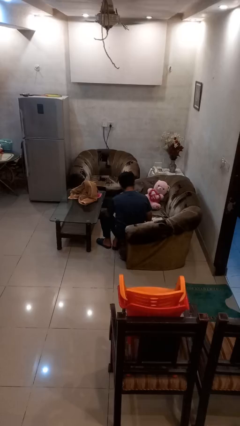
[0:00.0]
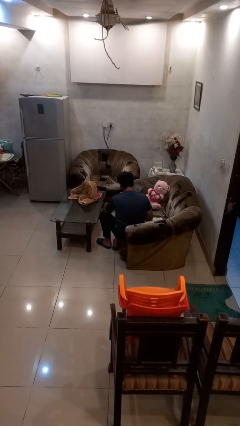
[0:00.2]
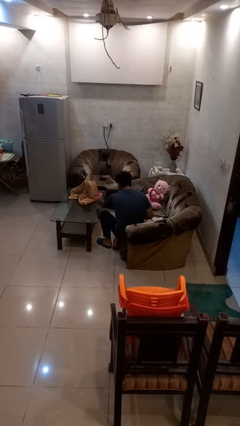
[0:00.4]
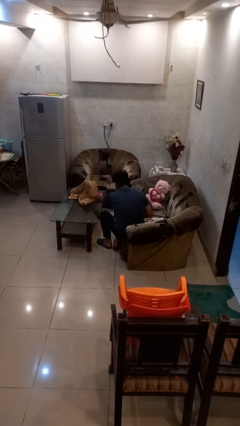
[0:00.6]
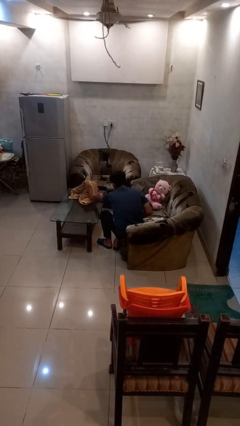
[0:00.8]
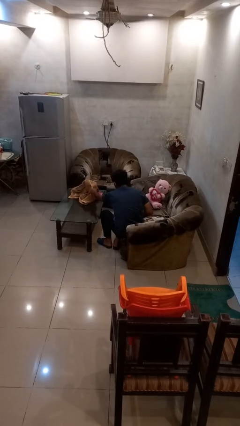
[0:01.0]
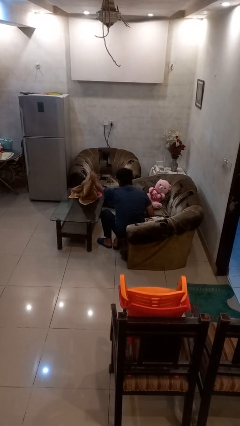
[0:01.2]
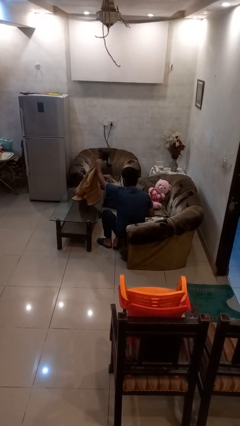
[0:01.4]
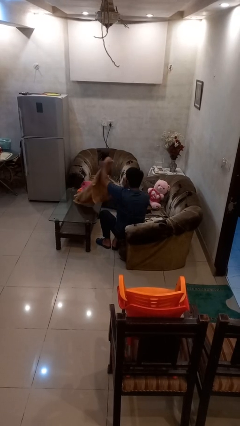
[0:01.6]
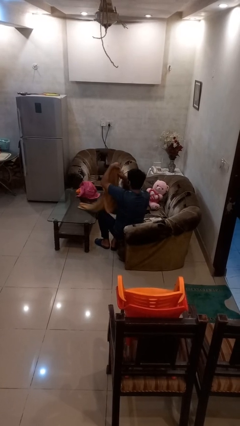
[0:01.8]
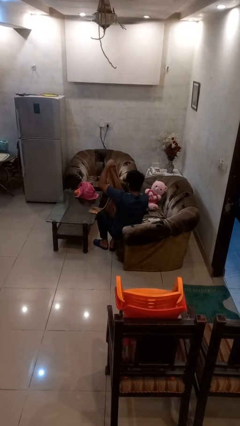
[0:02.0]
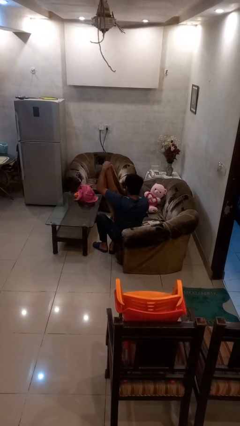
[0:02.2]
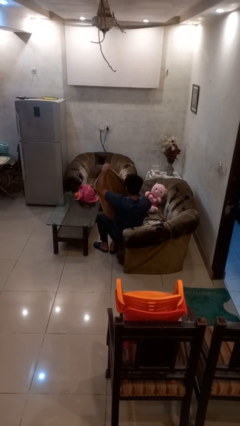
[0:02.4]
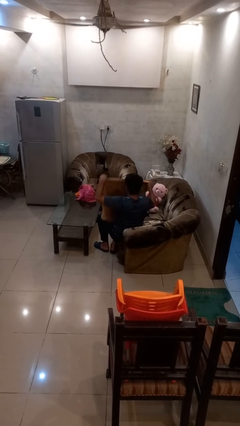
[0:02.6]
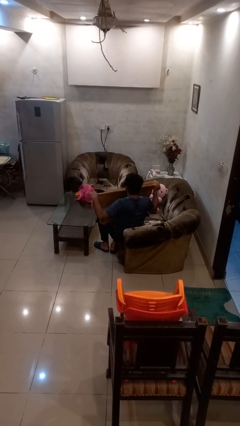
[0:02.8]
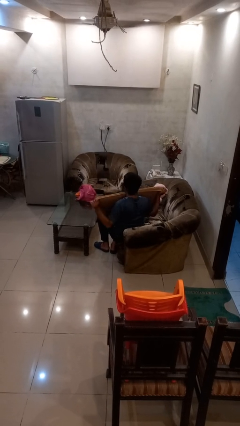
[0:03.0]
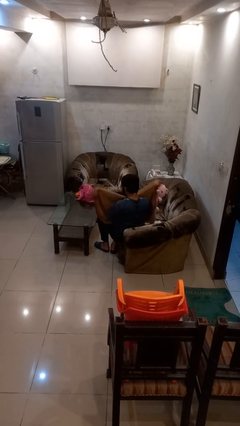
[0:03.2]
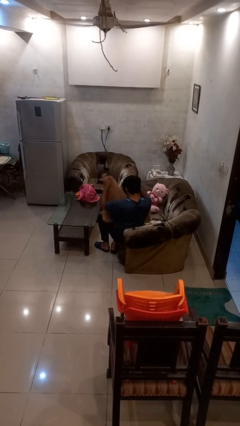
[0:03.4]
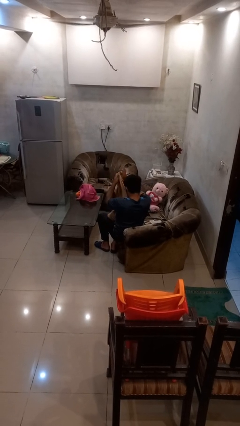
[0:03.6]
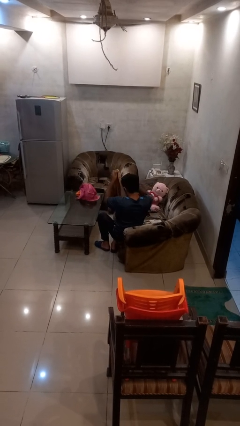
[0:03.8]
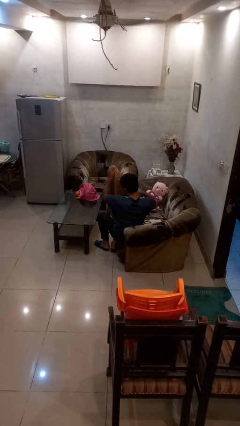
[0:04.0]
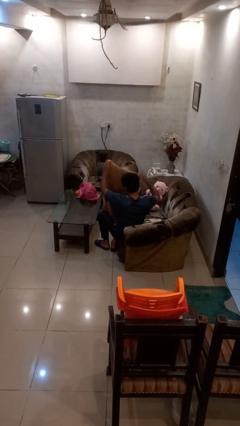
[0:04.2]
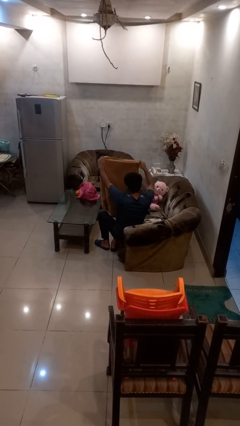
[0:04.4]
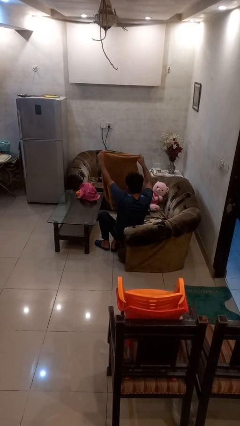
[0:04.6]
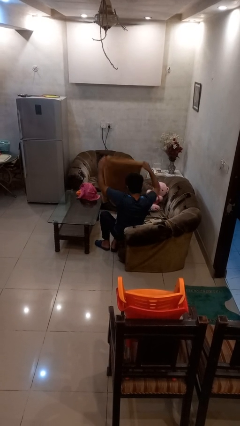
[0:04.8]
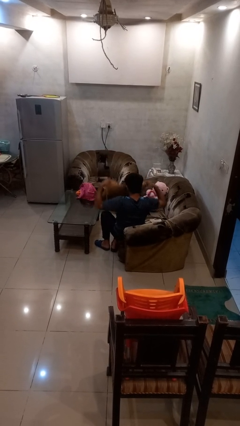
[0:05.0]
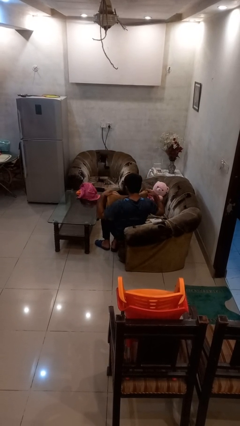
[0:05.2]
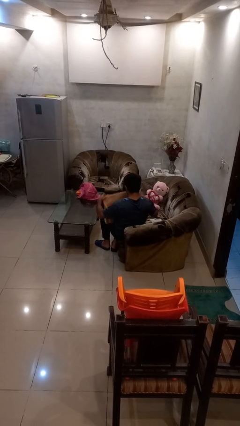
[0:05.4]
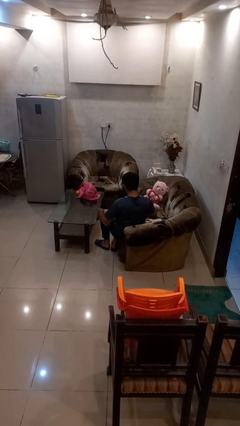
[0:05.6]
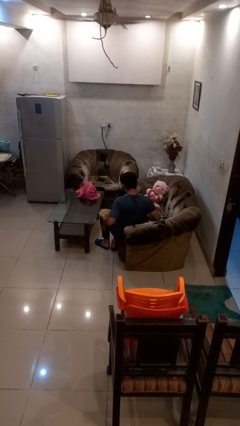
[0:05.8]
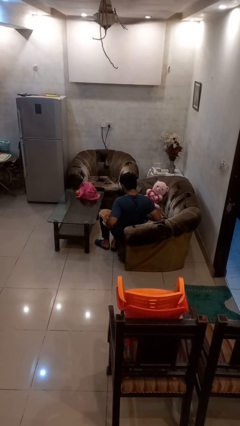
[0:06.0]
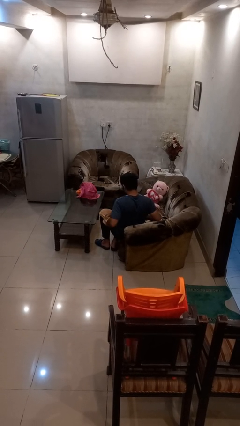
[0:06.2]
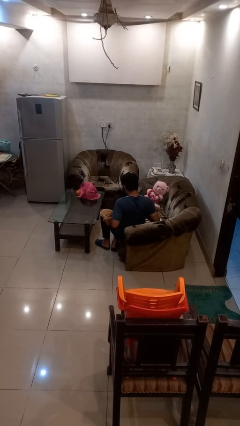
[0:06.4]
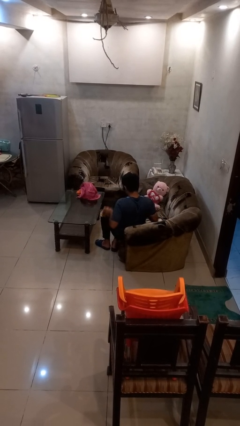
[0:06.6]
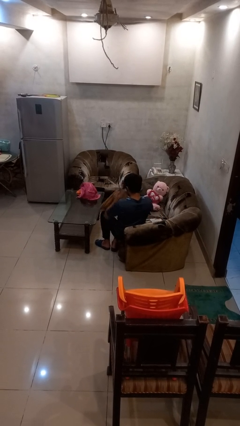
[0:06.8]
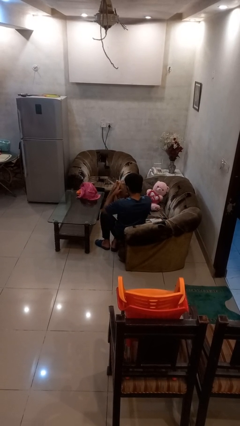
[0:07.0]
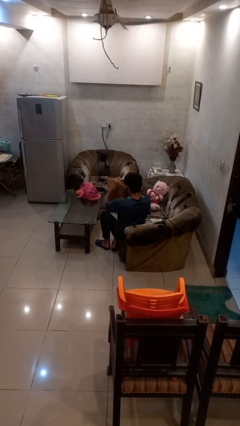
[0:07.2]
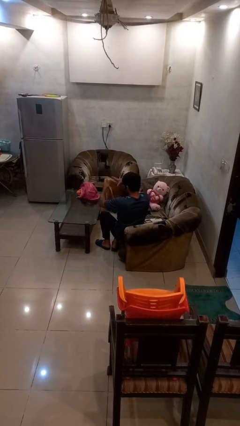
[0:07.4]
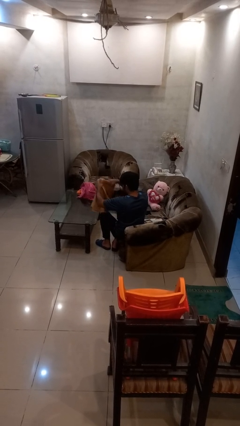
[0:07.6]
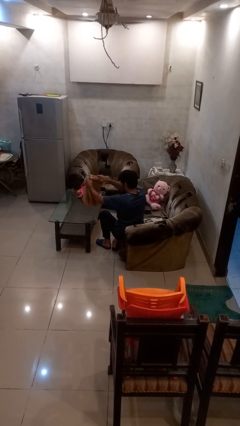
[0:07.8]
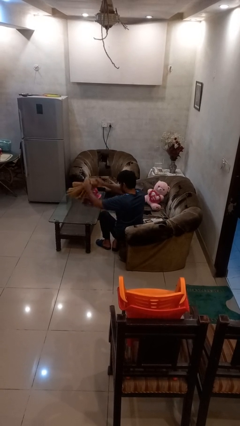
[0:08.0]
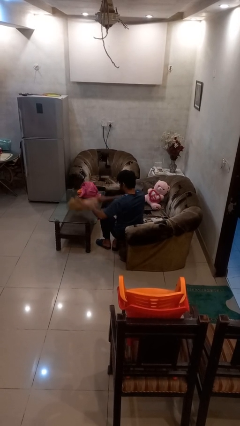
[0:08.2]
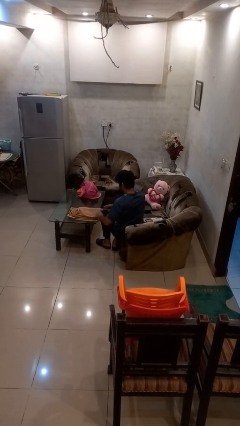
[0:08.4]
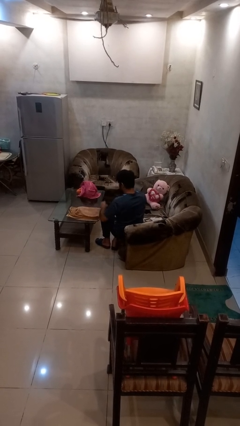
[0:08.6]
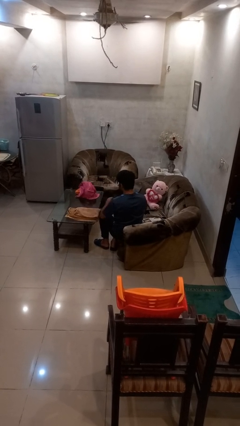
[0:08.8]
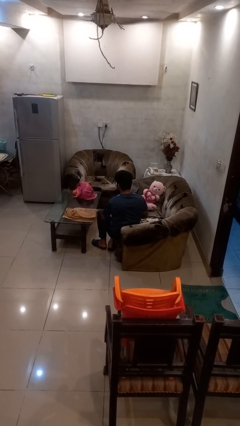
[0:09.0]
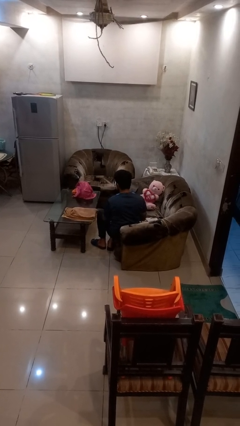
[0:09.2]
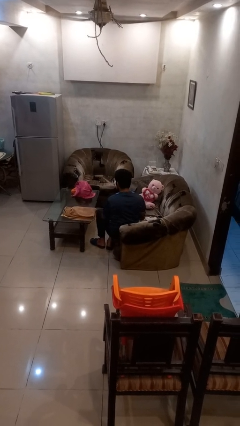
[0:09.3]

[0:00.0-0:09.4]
person folds towel

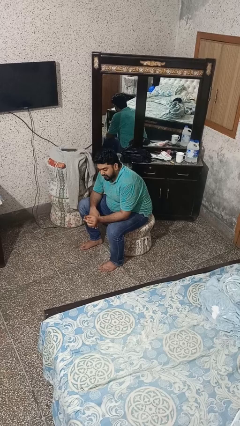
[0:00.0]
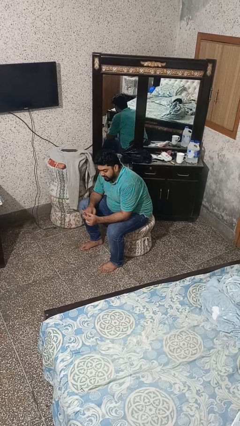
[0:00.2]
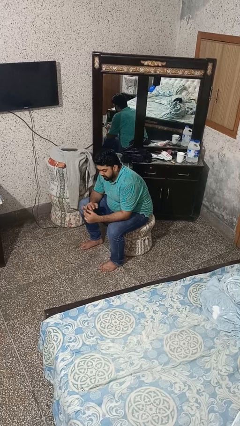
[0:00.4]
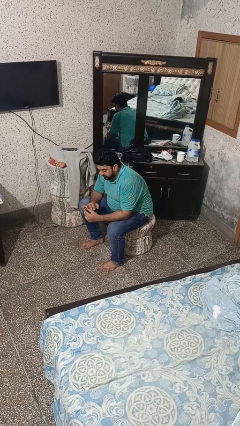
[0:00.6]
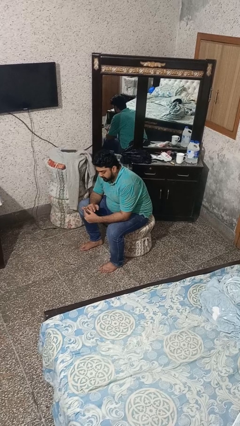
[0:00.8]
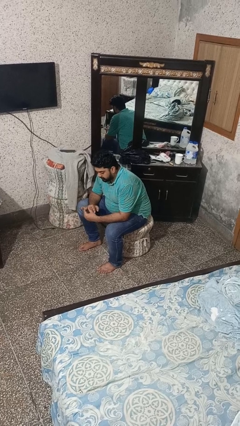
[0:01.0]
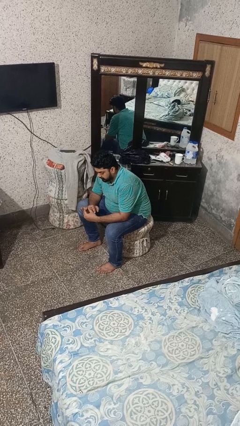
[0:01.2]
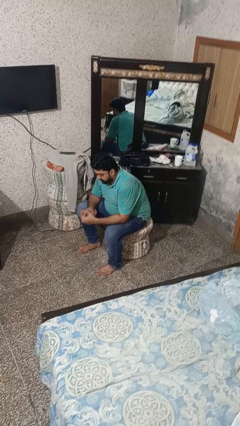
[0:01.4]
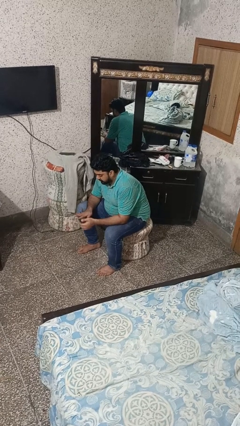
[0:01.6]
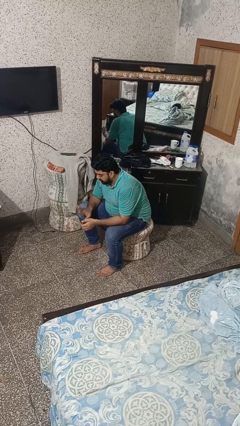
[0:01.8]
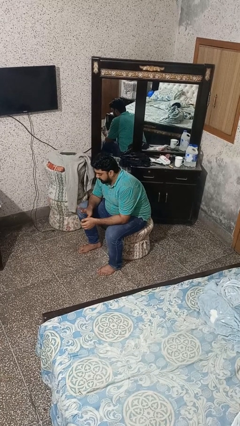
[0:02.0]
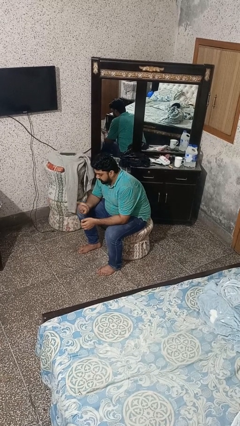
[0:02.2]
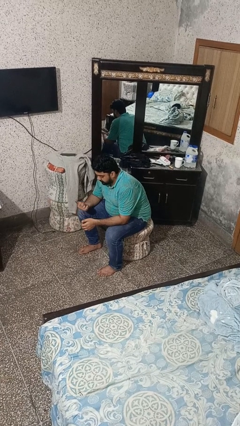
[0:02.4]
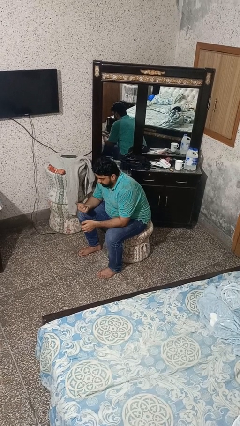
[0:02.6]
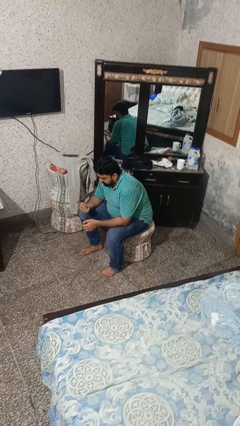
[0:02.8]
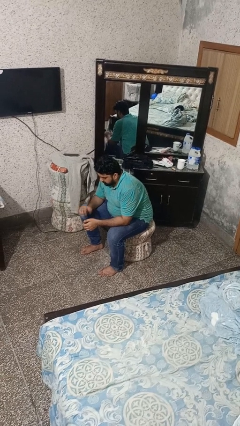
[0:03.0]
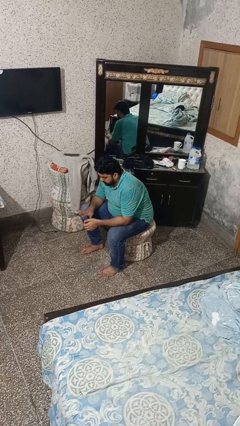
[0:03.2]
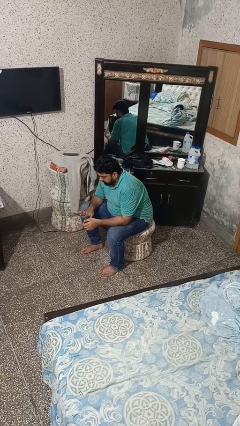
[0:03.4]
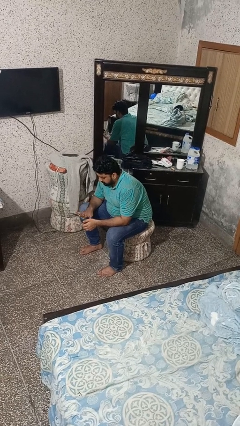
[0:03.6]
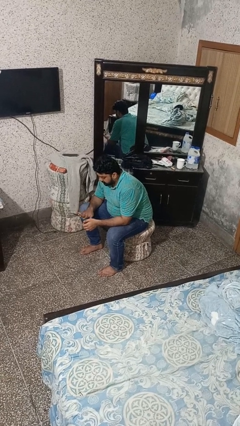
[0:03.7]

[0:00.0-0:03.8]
person puts on ring

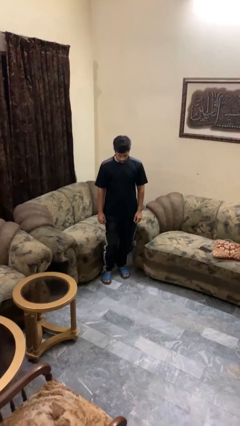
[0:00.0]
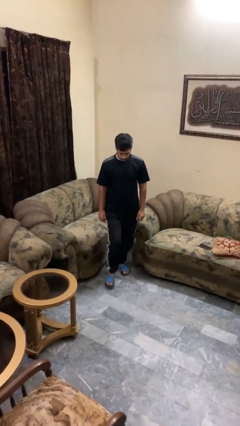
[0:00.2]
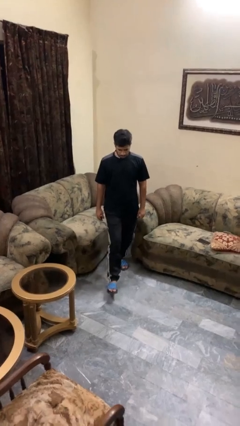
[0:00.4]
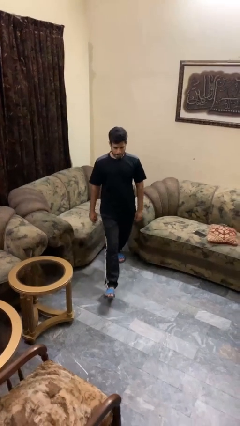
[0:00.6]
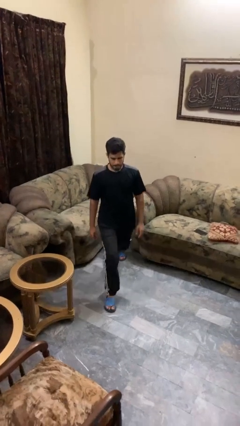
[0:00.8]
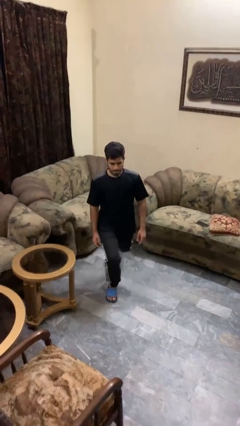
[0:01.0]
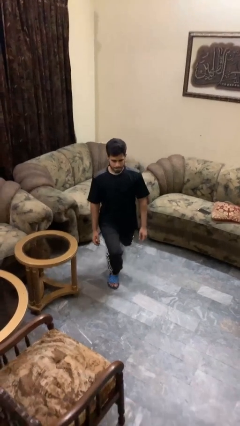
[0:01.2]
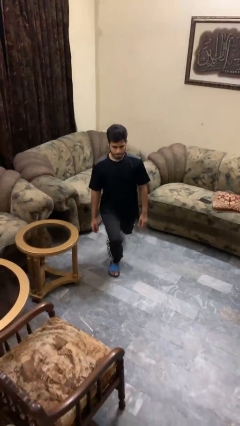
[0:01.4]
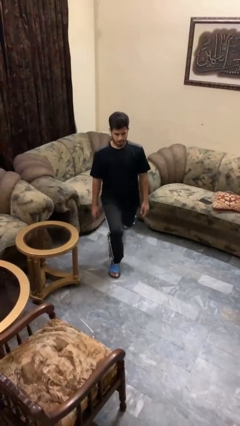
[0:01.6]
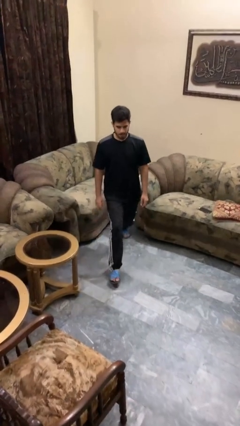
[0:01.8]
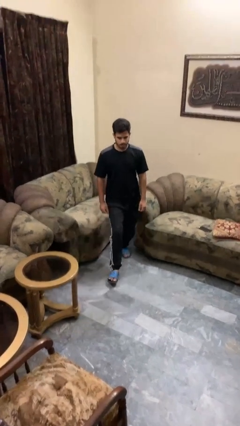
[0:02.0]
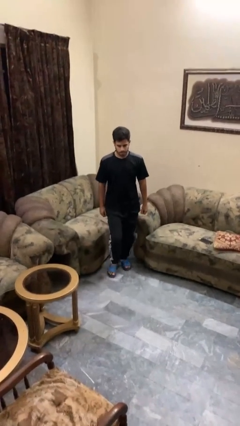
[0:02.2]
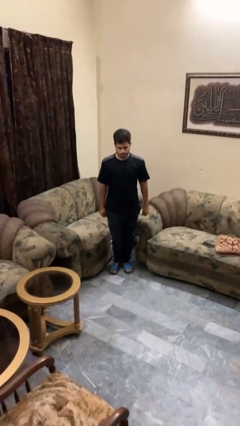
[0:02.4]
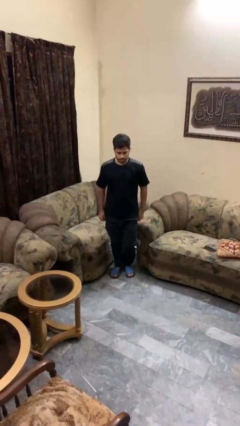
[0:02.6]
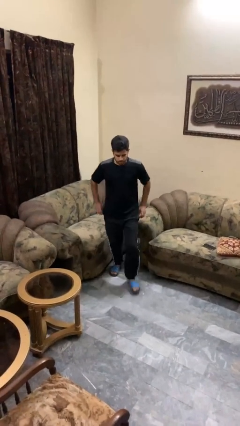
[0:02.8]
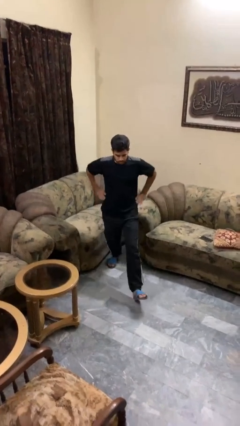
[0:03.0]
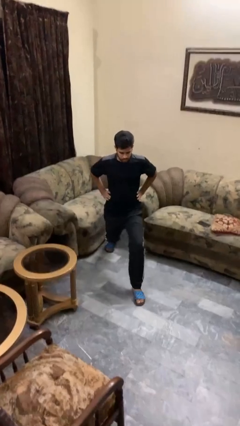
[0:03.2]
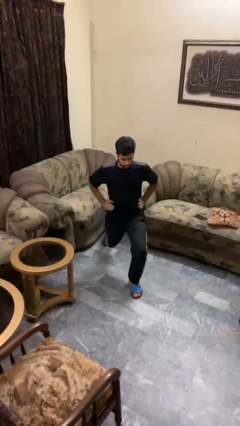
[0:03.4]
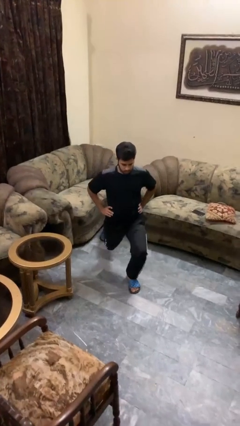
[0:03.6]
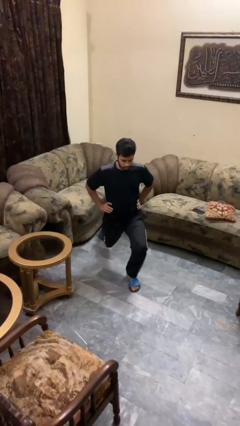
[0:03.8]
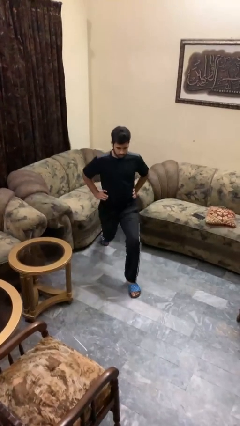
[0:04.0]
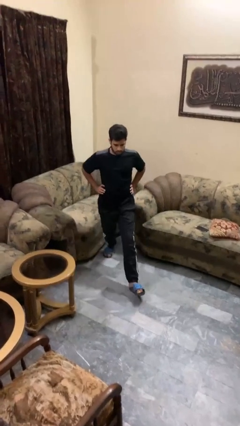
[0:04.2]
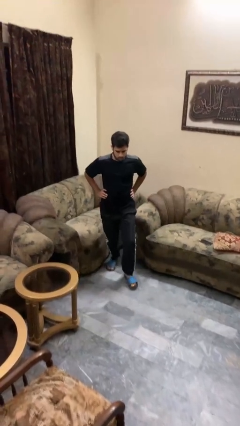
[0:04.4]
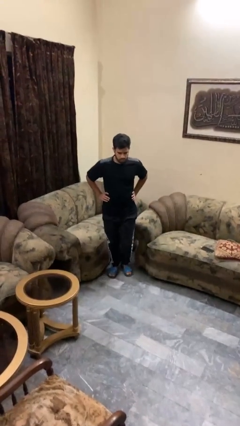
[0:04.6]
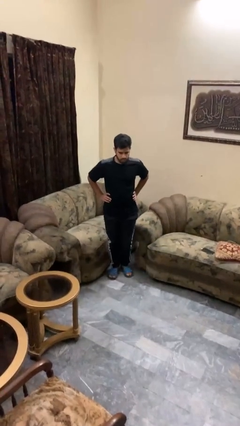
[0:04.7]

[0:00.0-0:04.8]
person exercises with lunges

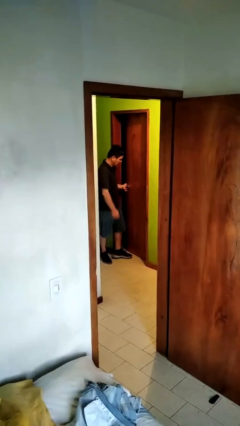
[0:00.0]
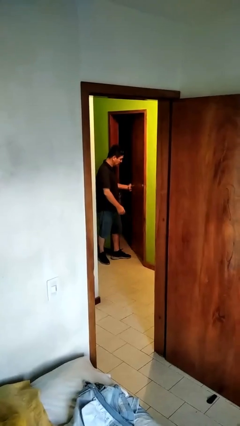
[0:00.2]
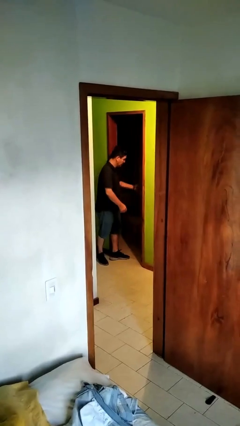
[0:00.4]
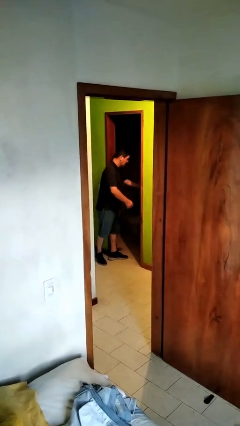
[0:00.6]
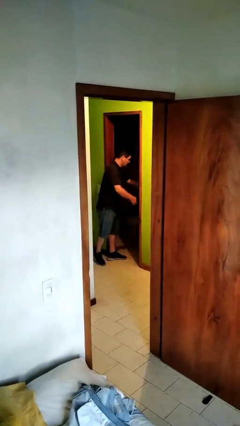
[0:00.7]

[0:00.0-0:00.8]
person opens facility door
